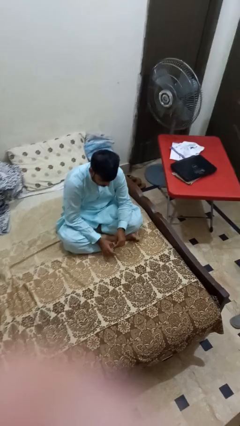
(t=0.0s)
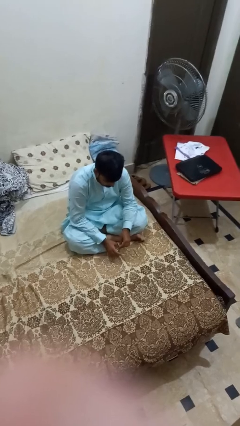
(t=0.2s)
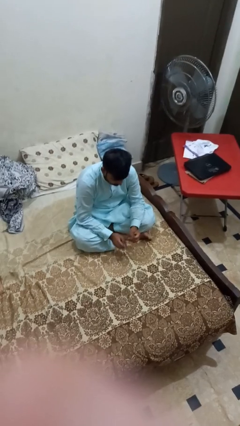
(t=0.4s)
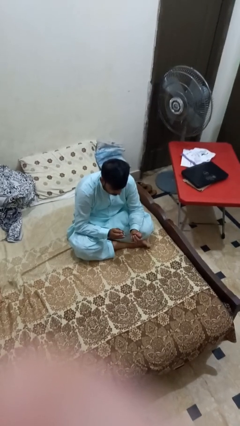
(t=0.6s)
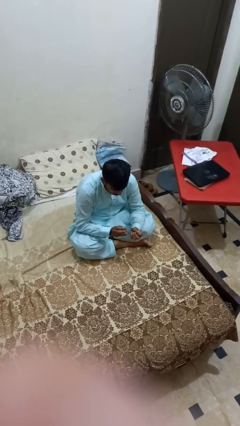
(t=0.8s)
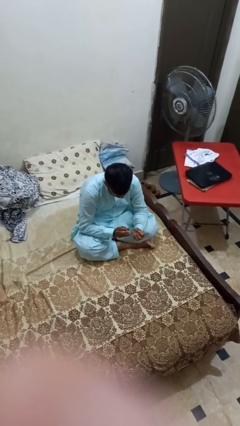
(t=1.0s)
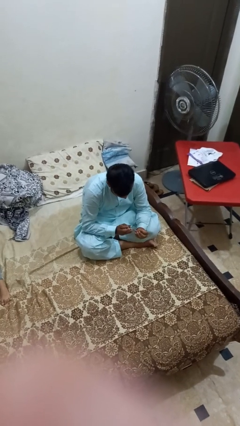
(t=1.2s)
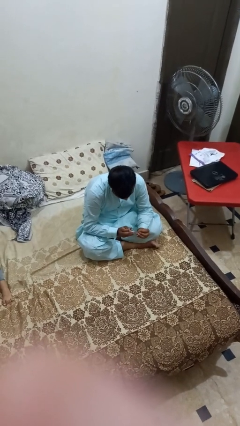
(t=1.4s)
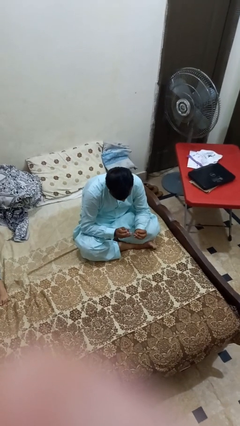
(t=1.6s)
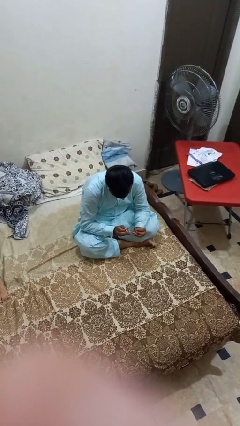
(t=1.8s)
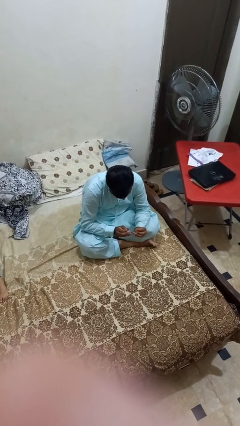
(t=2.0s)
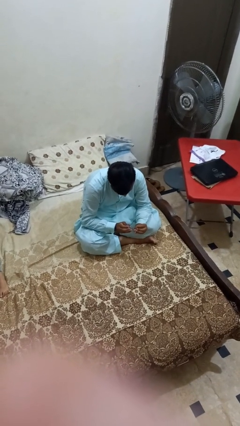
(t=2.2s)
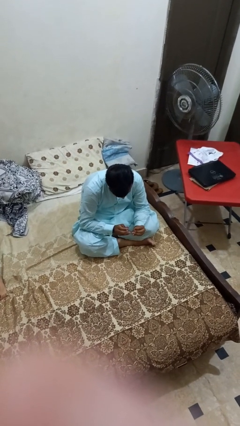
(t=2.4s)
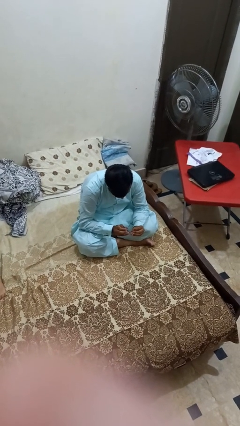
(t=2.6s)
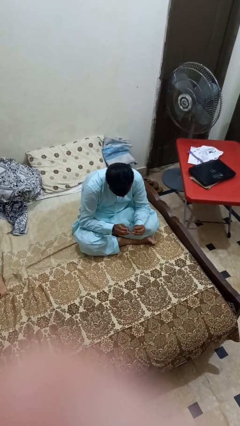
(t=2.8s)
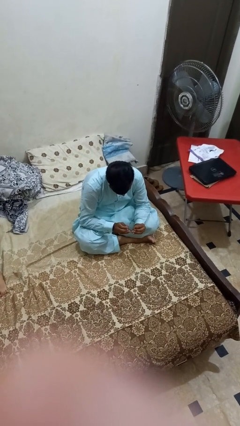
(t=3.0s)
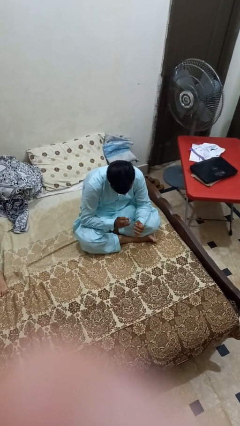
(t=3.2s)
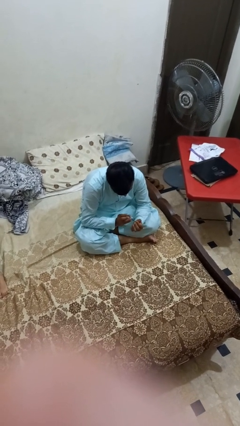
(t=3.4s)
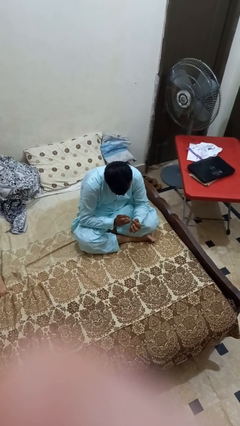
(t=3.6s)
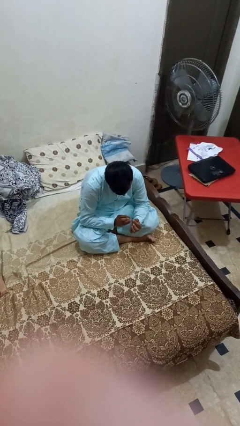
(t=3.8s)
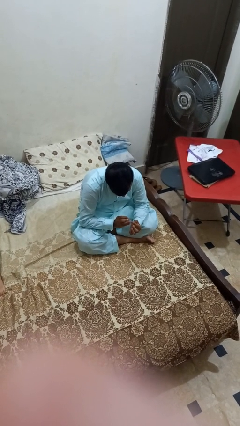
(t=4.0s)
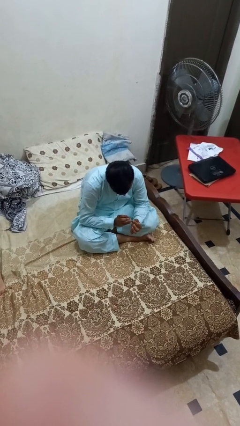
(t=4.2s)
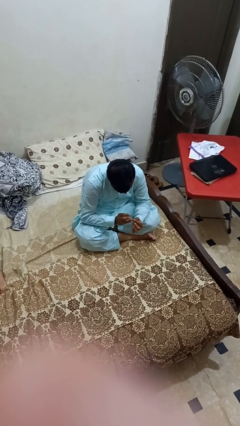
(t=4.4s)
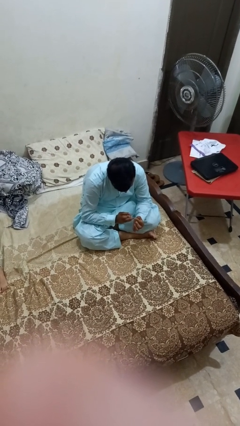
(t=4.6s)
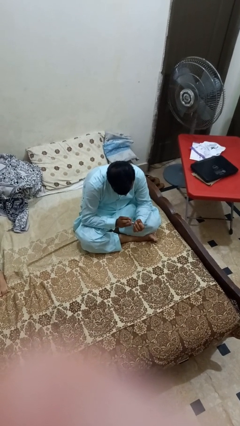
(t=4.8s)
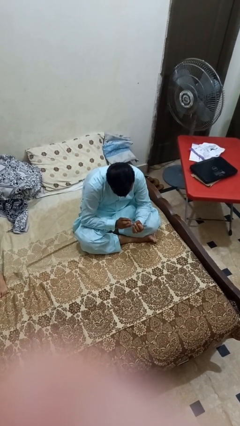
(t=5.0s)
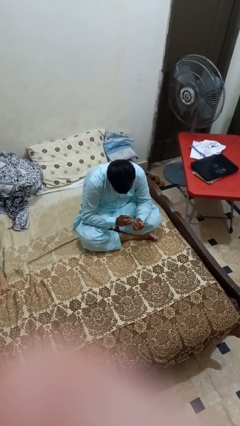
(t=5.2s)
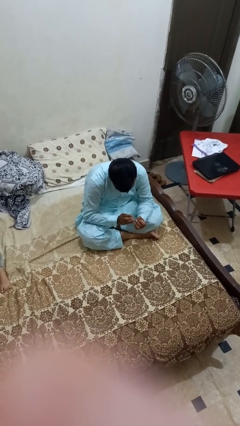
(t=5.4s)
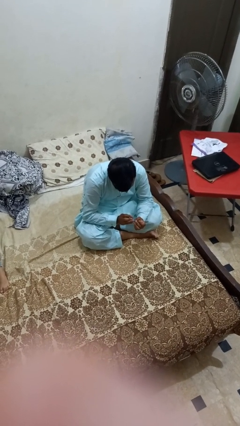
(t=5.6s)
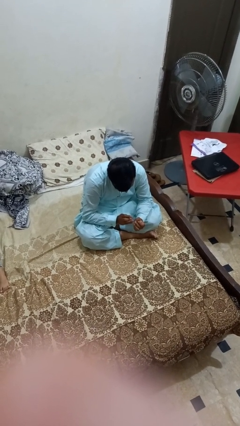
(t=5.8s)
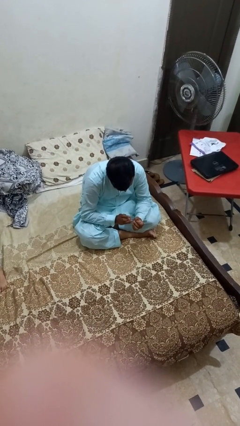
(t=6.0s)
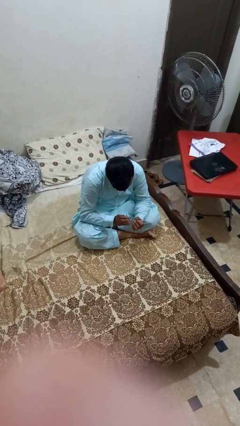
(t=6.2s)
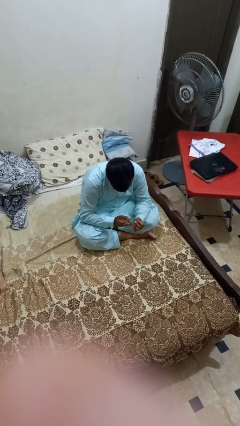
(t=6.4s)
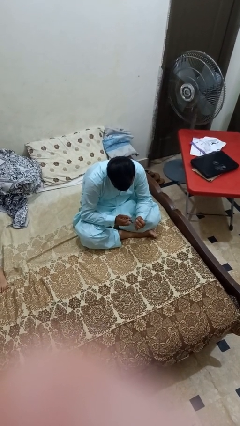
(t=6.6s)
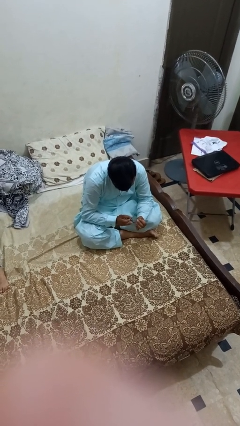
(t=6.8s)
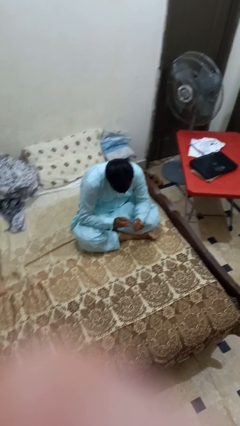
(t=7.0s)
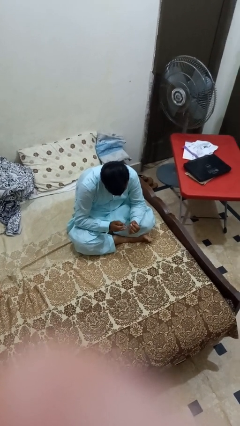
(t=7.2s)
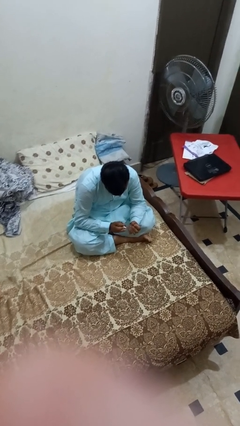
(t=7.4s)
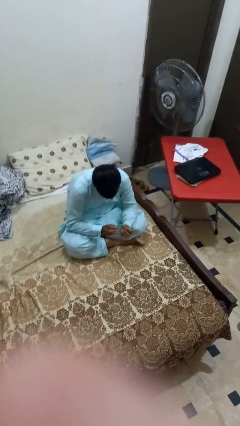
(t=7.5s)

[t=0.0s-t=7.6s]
person clips fingernails

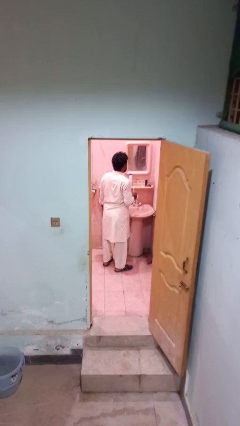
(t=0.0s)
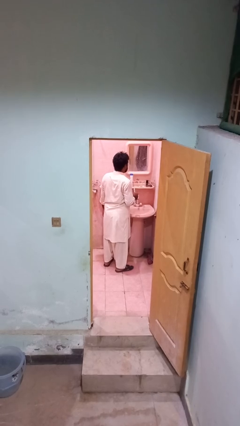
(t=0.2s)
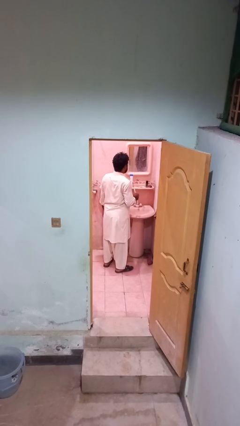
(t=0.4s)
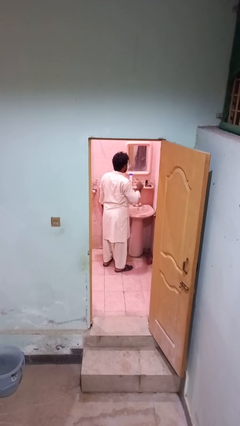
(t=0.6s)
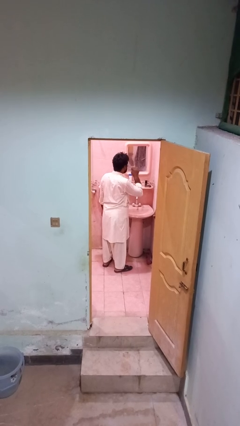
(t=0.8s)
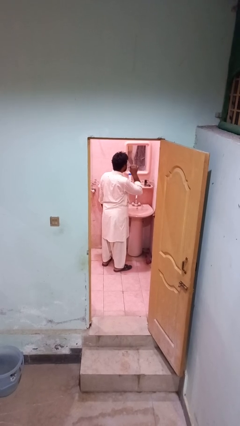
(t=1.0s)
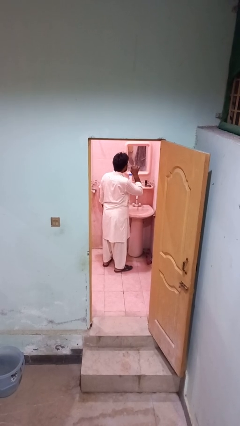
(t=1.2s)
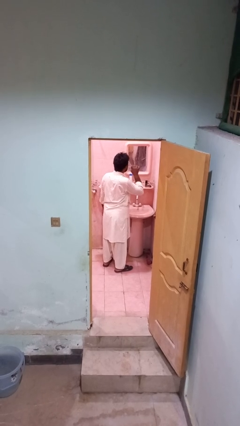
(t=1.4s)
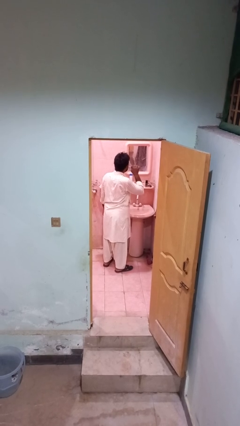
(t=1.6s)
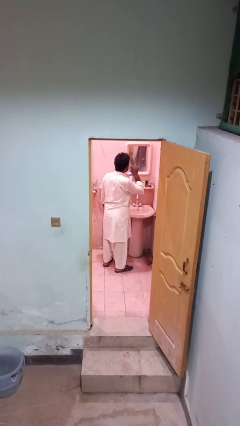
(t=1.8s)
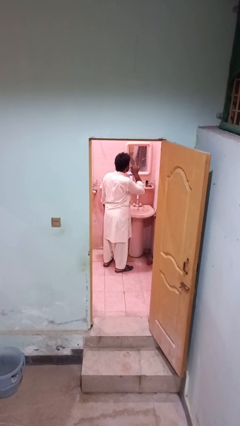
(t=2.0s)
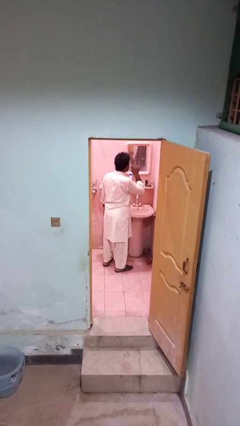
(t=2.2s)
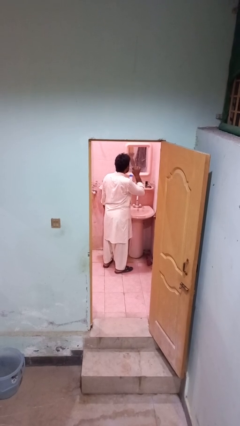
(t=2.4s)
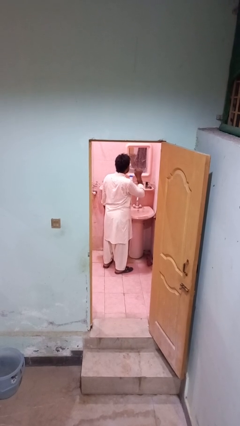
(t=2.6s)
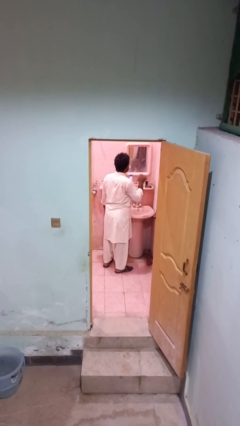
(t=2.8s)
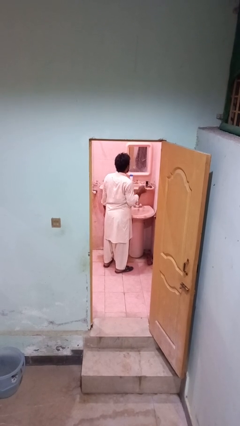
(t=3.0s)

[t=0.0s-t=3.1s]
person brushes teeth

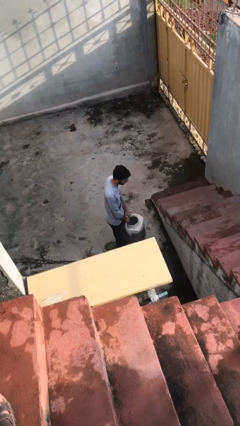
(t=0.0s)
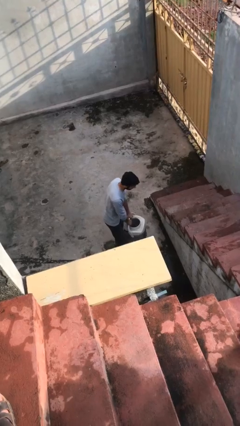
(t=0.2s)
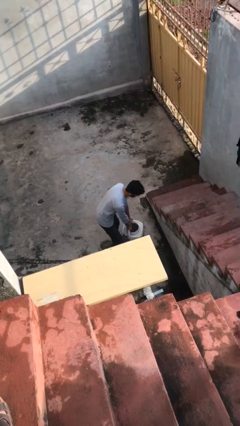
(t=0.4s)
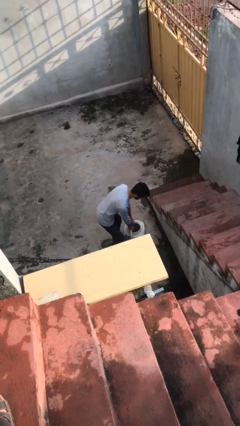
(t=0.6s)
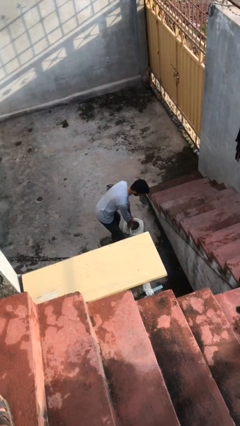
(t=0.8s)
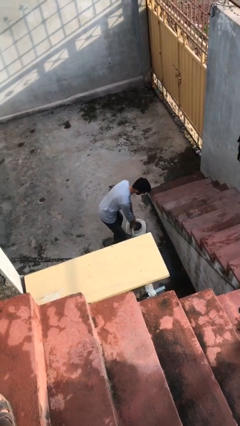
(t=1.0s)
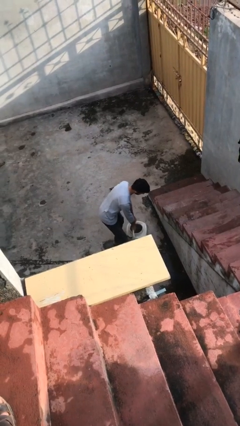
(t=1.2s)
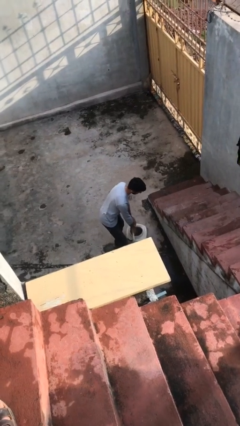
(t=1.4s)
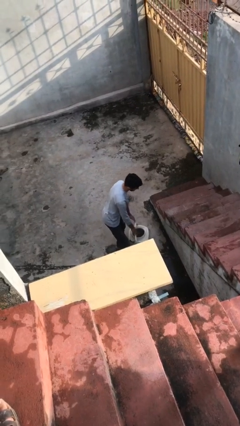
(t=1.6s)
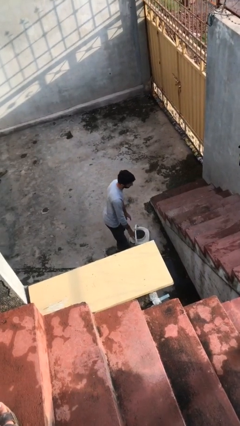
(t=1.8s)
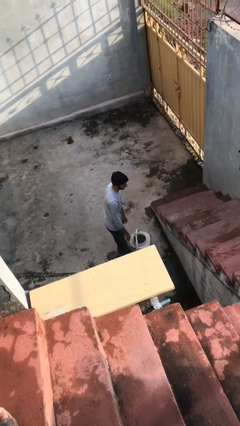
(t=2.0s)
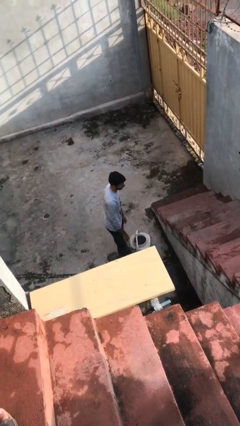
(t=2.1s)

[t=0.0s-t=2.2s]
person puts down object on floor

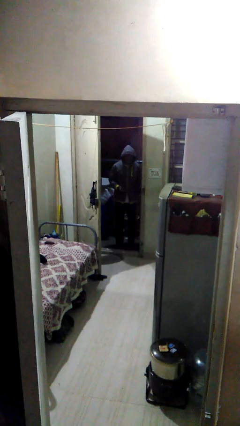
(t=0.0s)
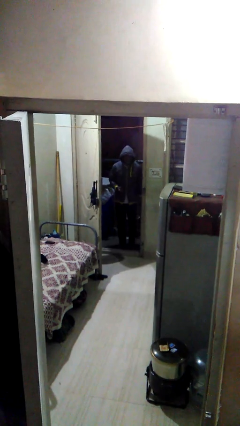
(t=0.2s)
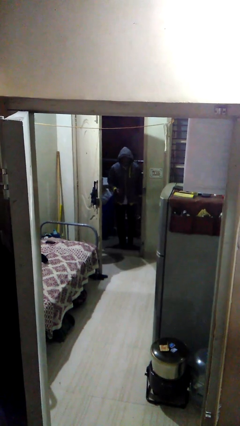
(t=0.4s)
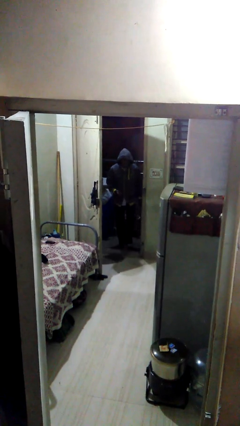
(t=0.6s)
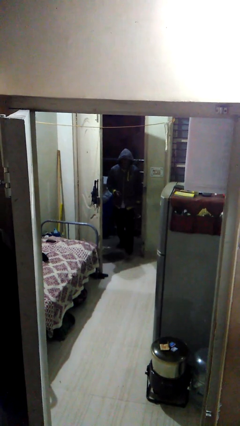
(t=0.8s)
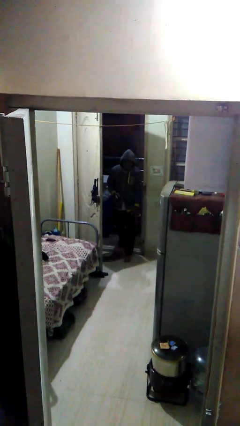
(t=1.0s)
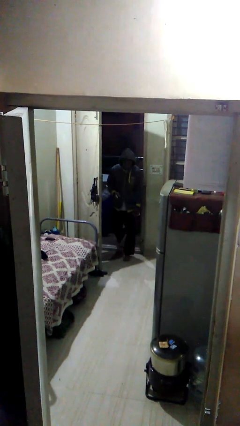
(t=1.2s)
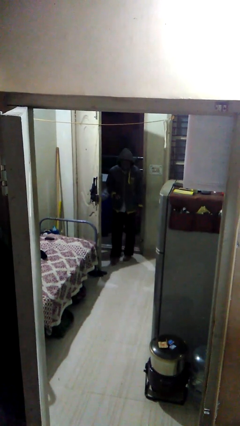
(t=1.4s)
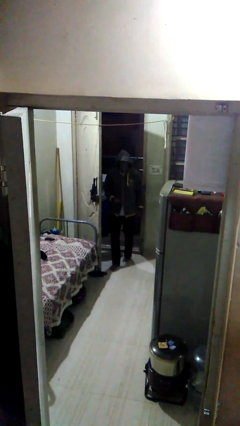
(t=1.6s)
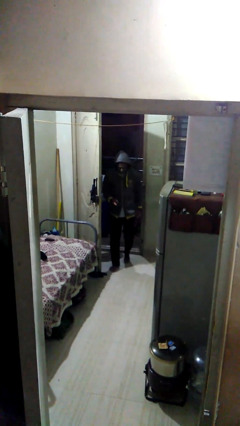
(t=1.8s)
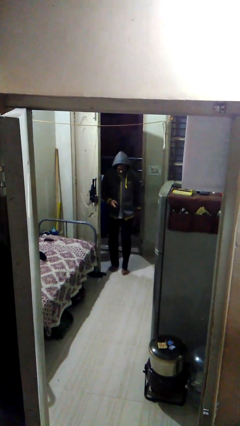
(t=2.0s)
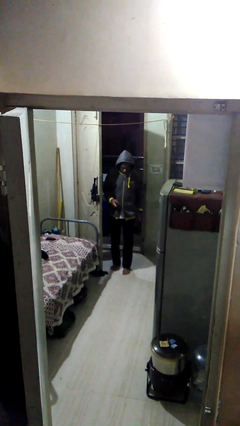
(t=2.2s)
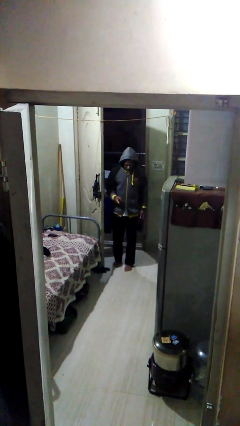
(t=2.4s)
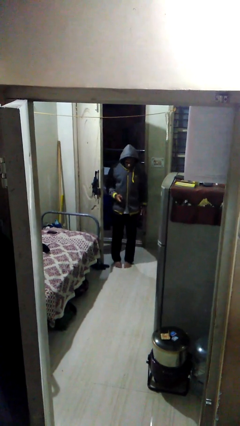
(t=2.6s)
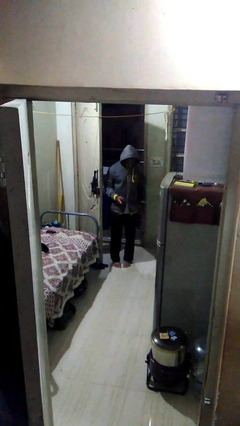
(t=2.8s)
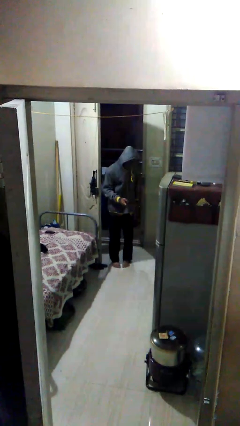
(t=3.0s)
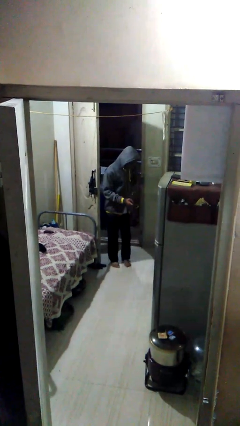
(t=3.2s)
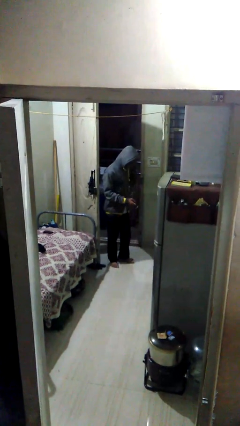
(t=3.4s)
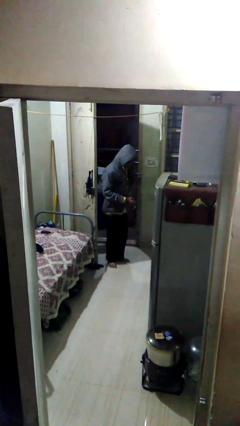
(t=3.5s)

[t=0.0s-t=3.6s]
person enters scene through structure

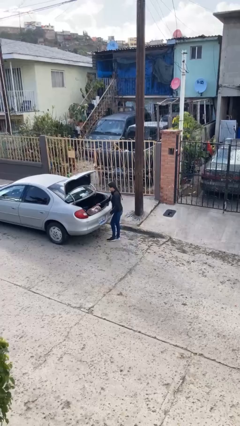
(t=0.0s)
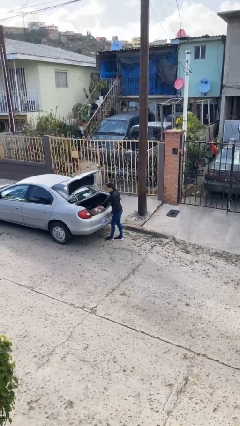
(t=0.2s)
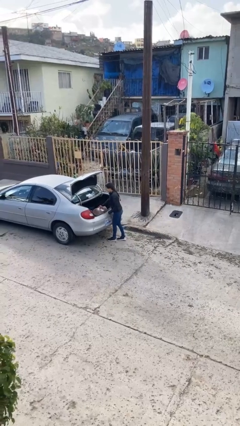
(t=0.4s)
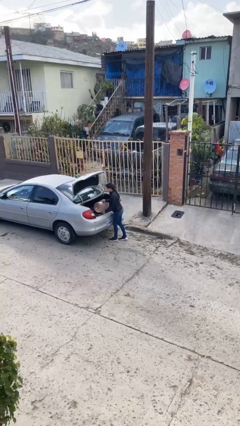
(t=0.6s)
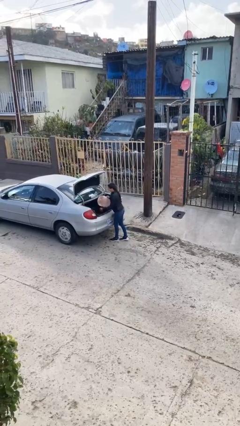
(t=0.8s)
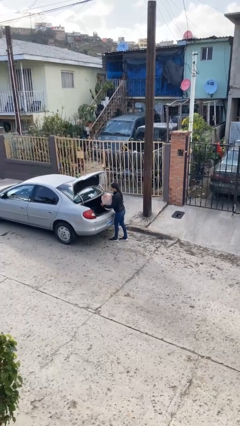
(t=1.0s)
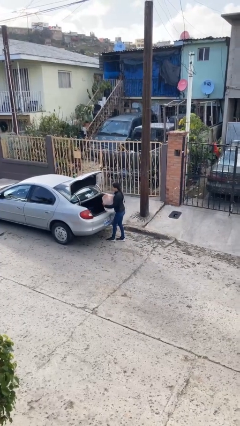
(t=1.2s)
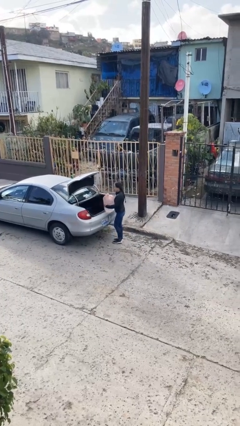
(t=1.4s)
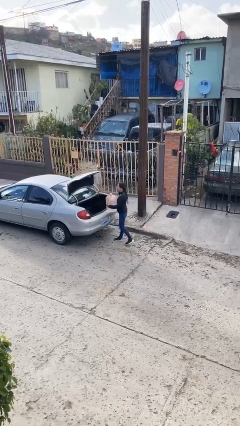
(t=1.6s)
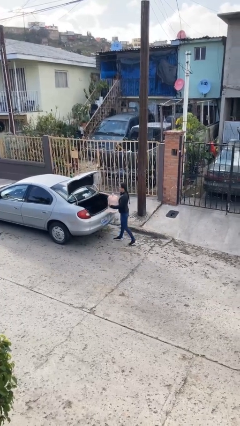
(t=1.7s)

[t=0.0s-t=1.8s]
person exits car
